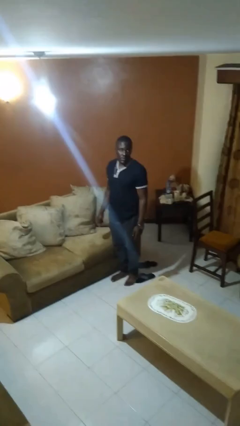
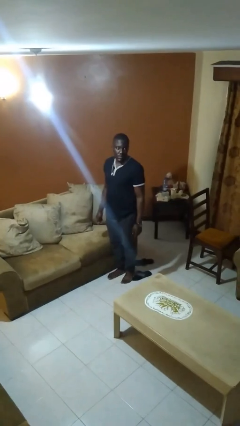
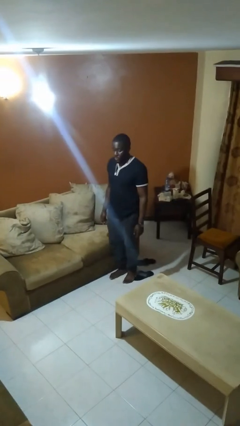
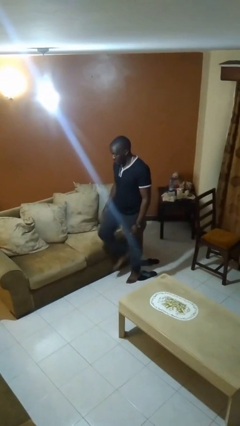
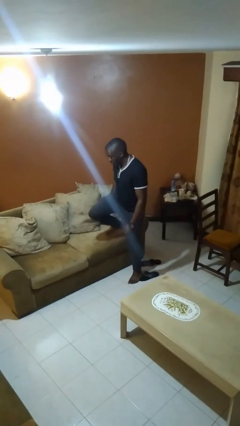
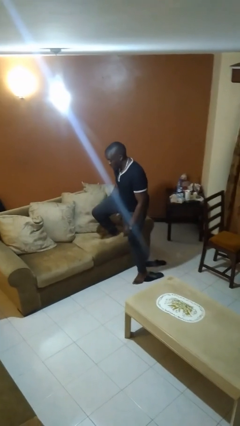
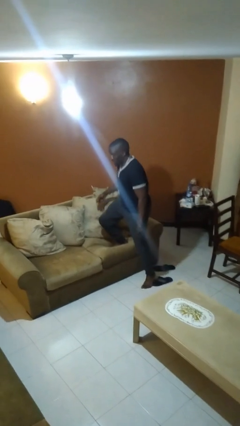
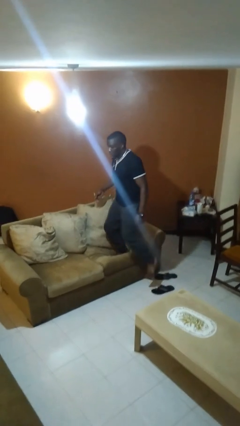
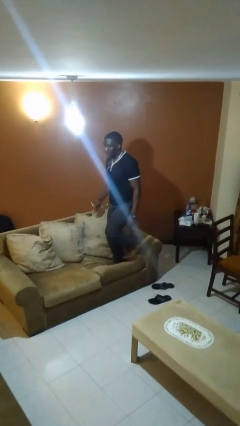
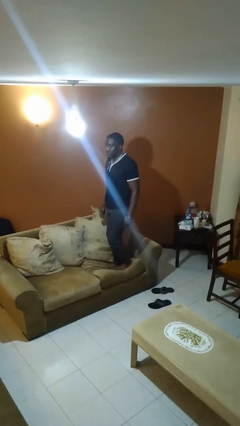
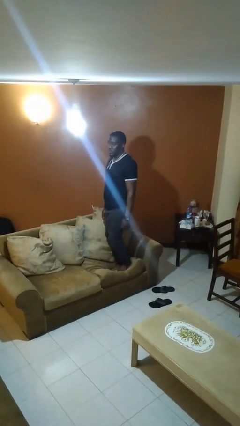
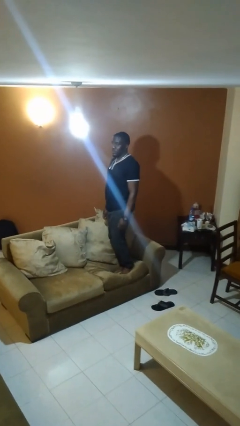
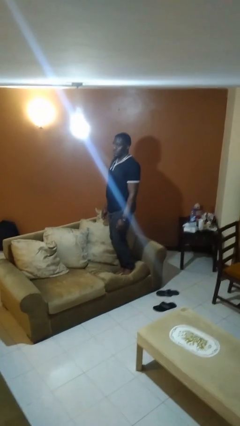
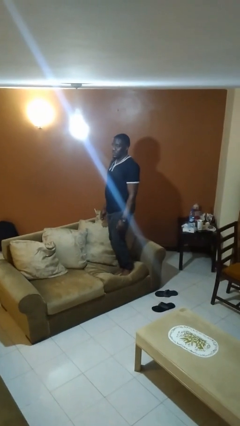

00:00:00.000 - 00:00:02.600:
person climbs on couch

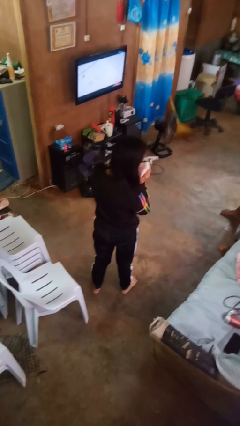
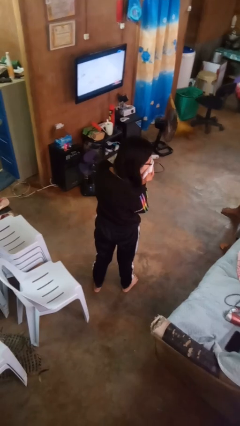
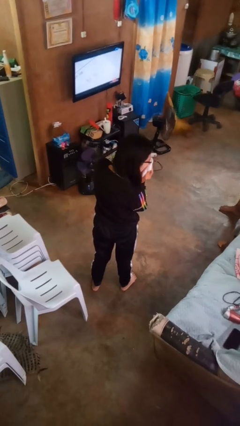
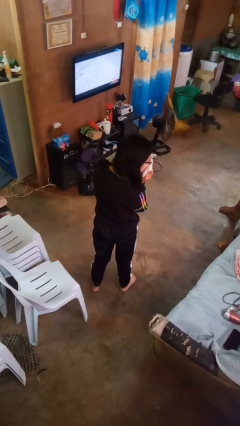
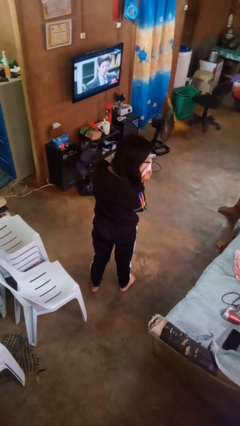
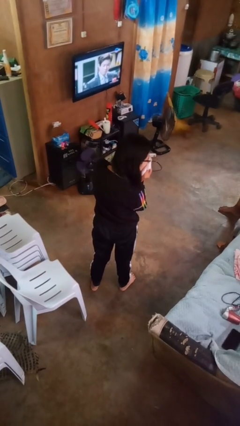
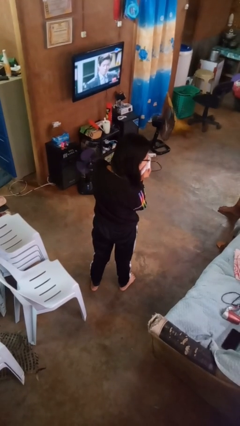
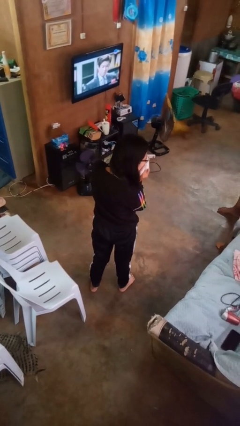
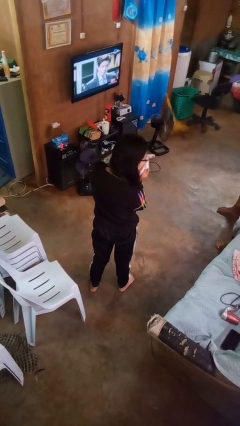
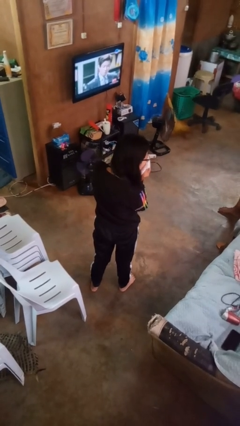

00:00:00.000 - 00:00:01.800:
person blows nose

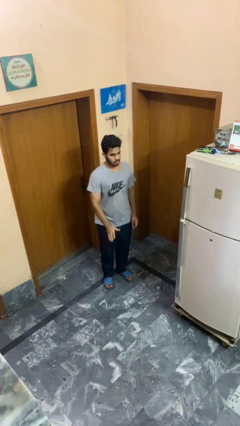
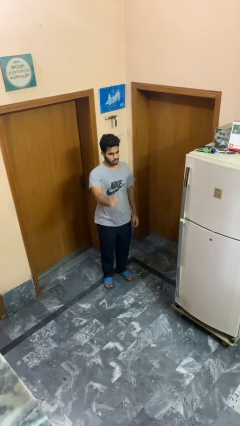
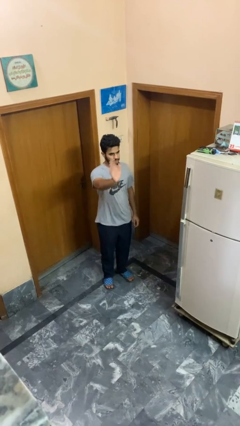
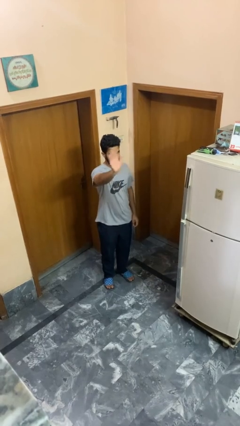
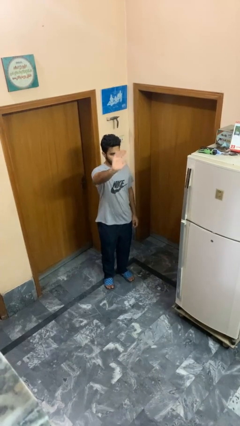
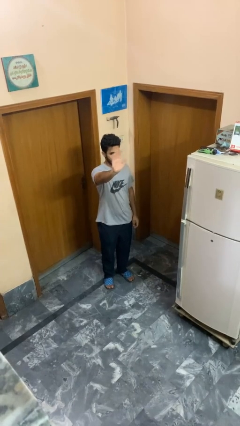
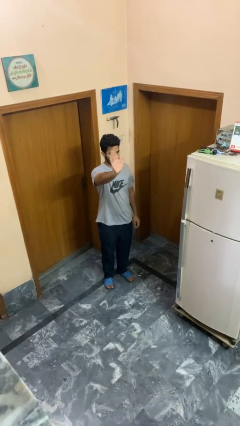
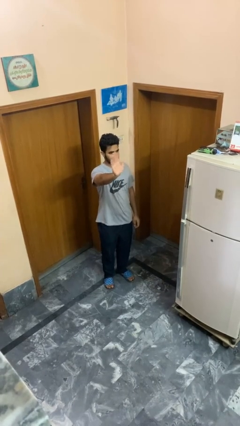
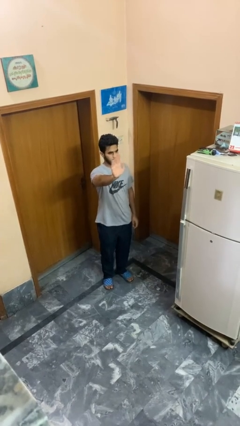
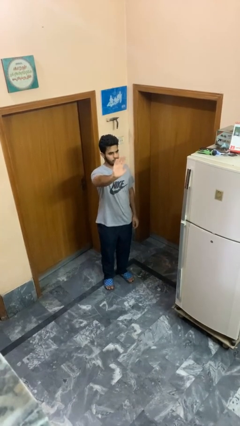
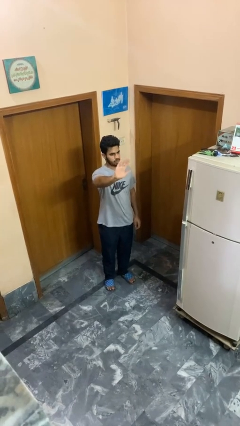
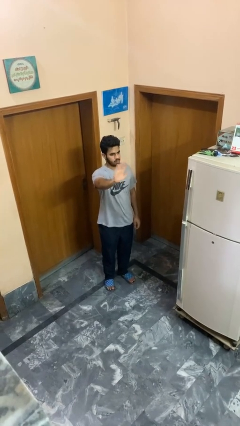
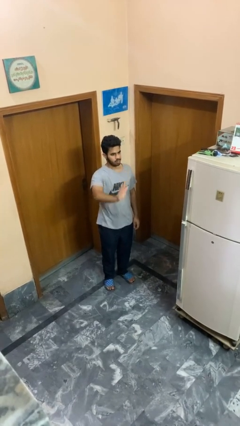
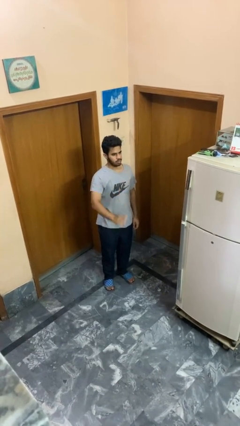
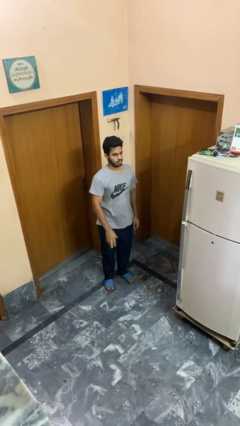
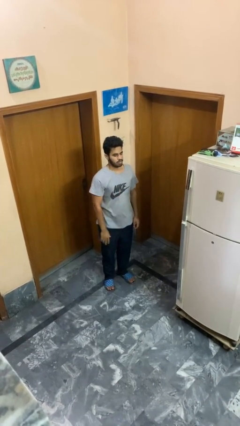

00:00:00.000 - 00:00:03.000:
person waves at person

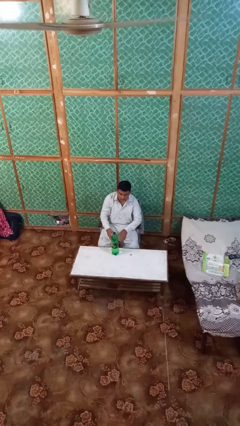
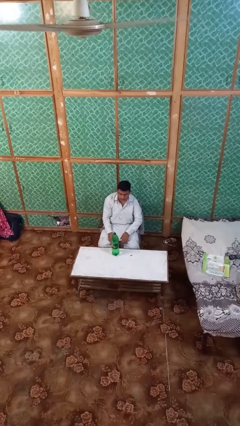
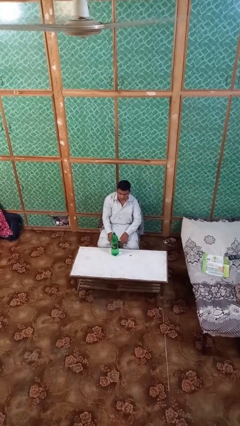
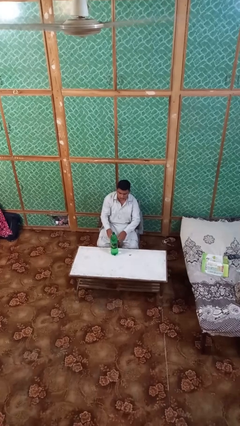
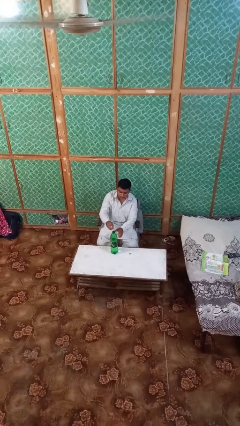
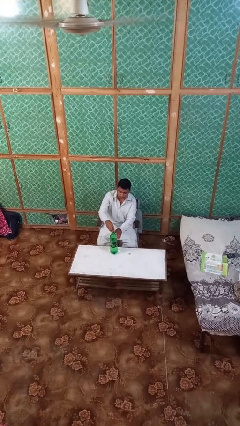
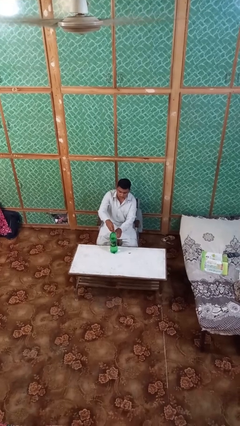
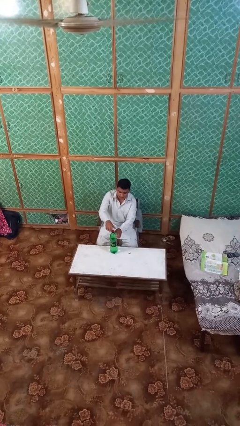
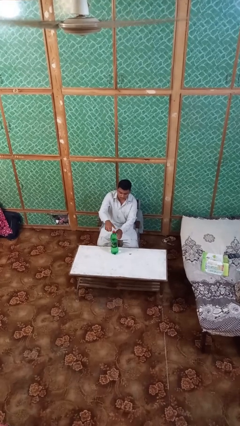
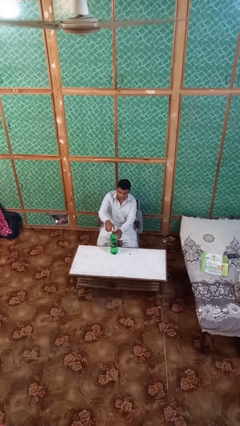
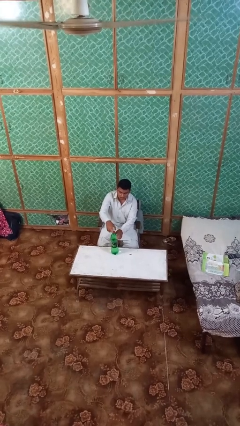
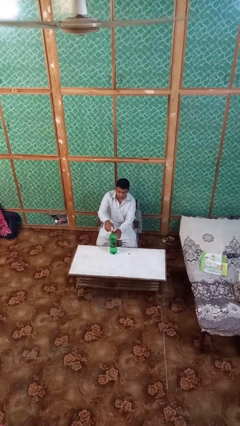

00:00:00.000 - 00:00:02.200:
person screws lid to bottle

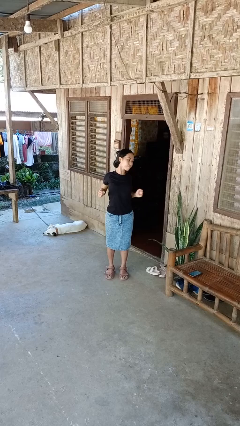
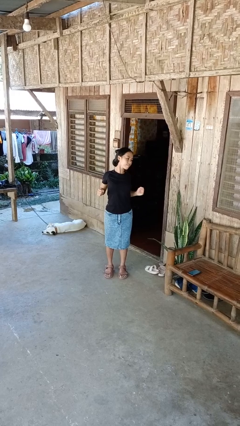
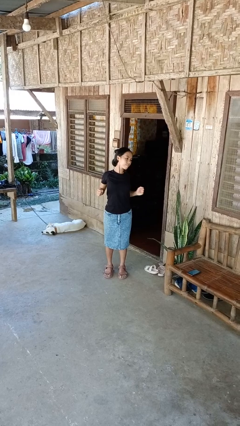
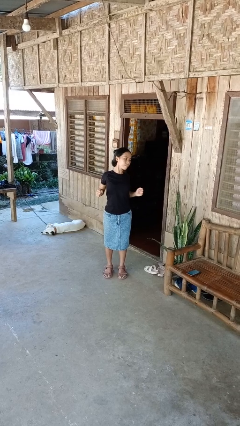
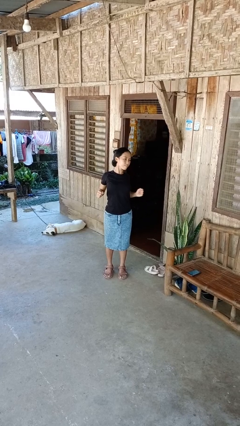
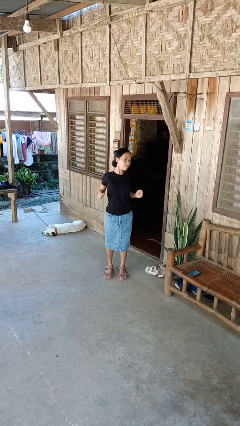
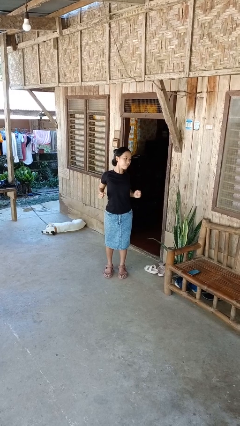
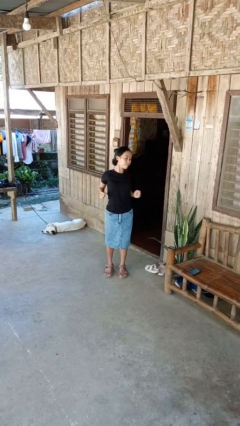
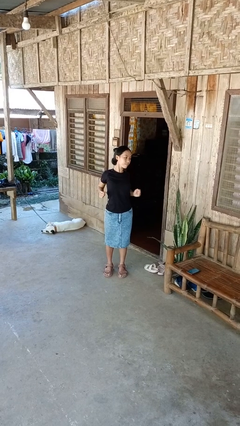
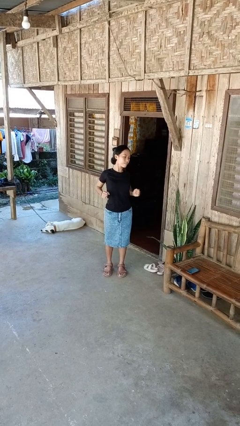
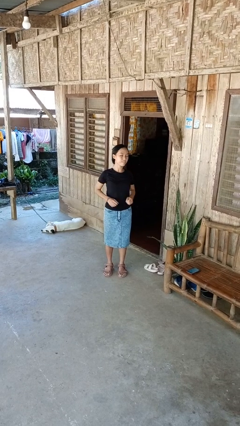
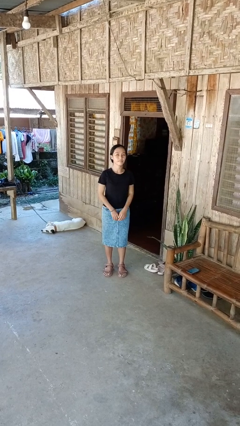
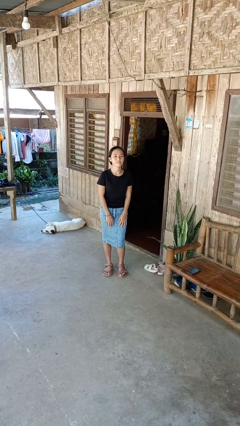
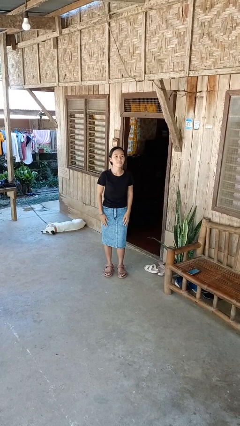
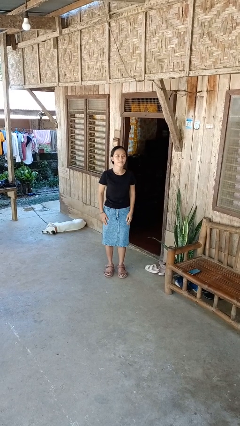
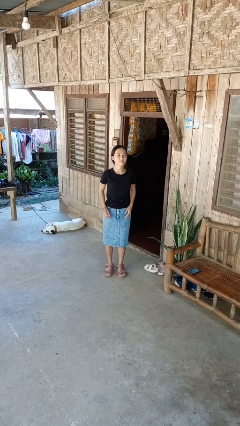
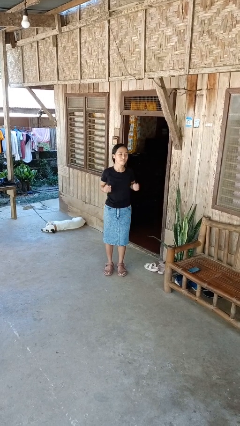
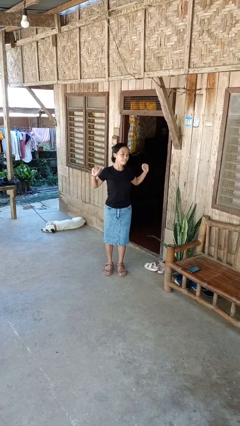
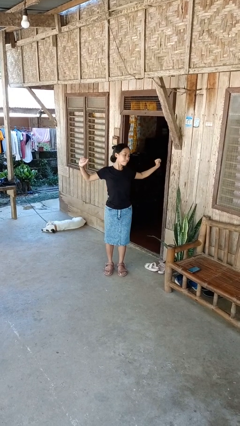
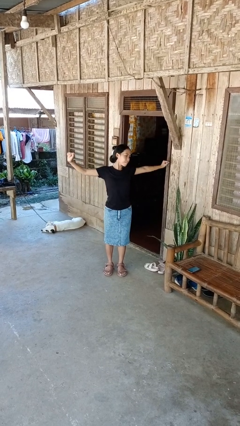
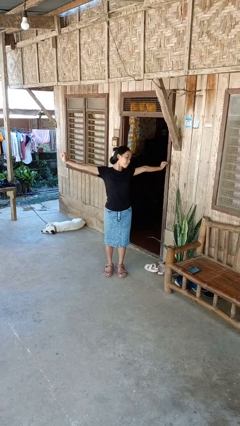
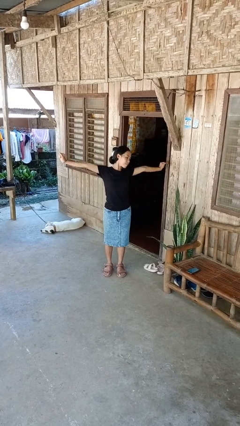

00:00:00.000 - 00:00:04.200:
person stretches back

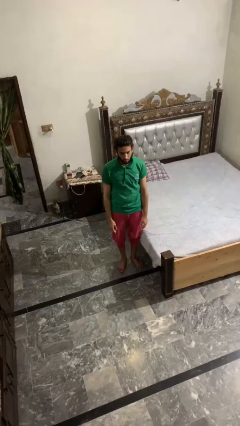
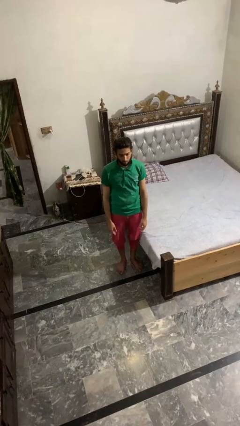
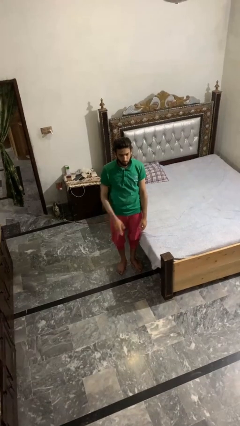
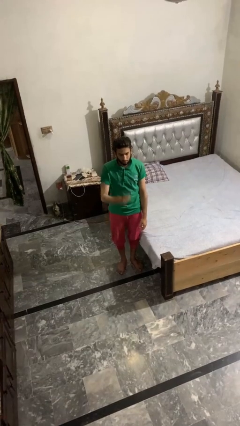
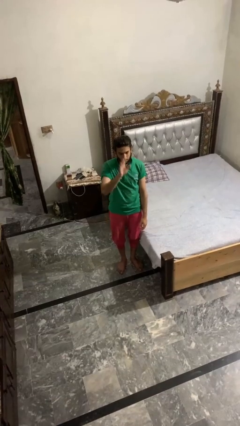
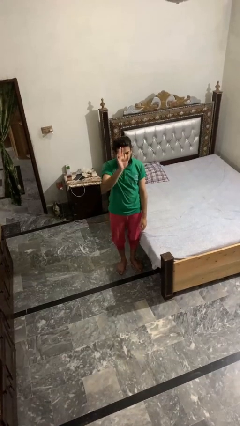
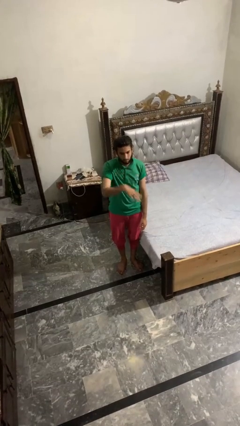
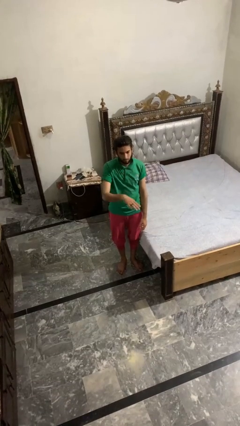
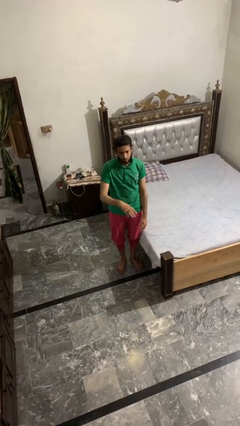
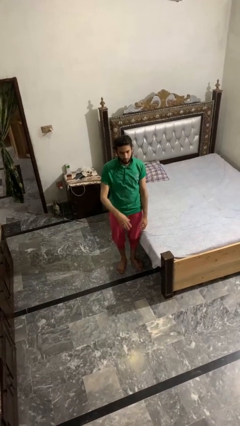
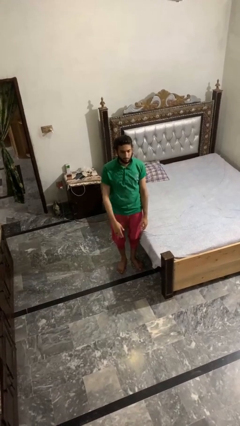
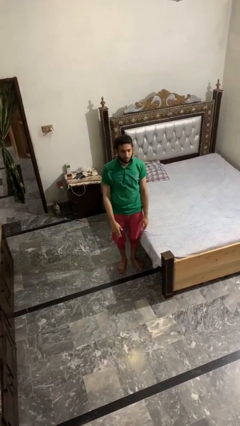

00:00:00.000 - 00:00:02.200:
person gestures swipe down

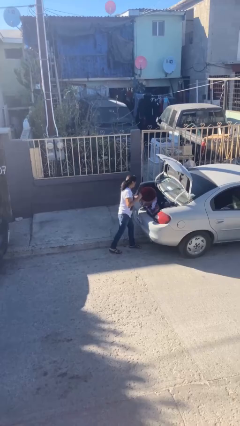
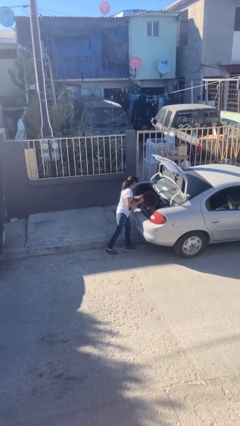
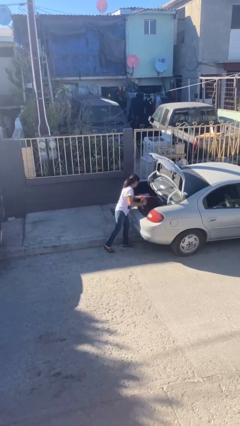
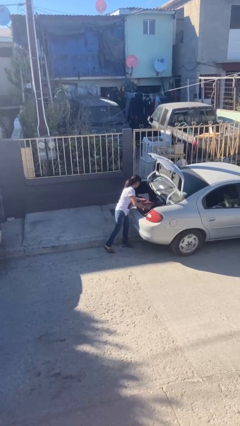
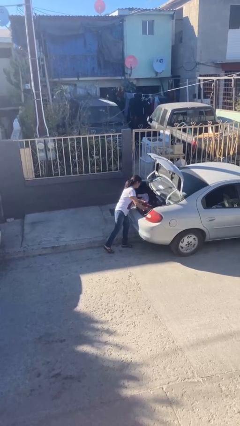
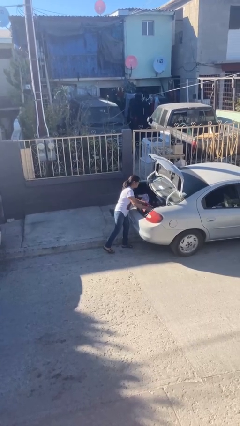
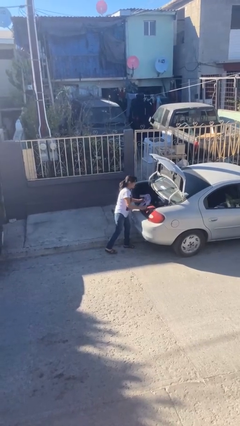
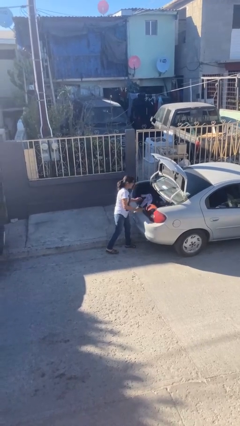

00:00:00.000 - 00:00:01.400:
person loads car
